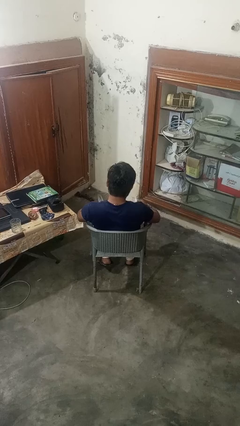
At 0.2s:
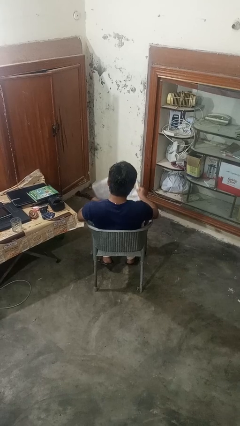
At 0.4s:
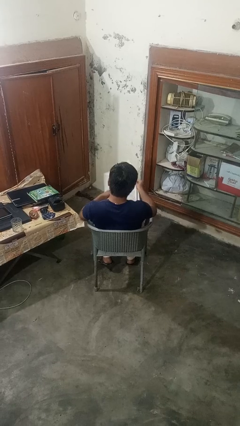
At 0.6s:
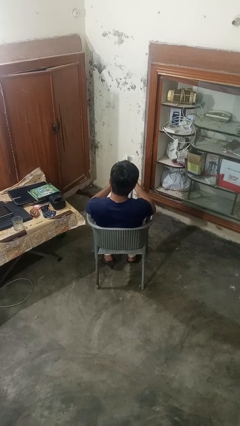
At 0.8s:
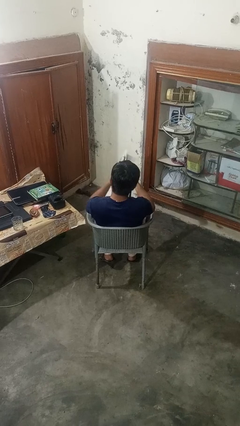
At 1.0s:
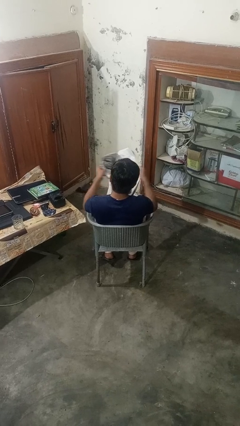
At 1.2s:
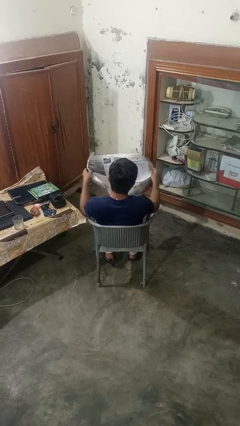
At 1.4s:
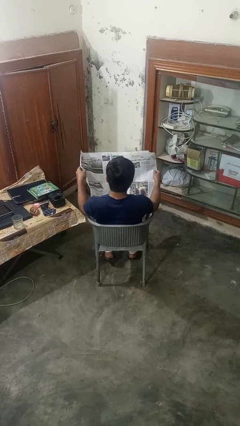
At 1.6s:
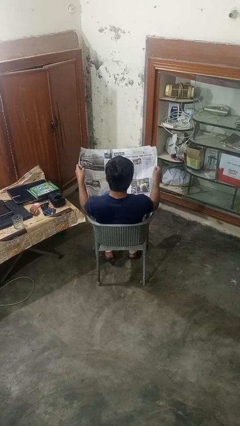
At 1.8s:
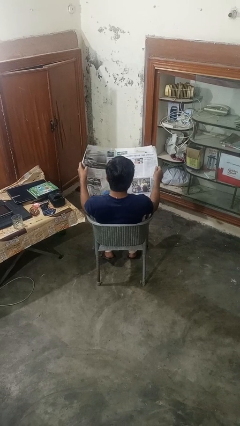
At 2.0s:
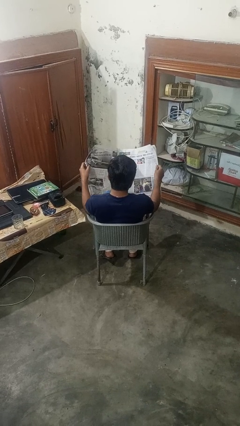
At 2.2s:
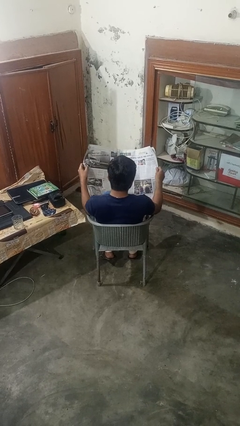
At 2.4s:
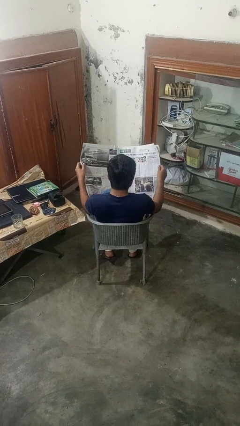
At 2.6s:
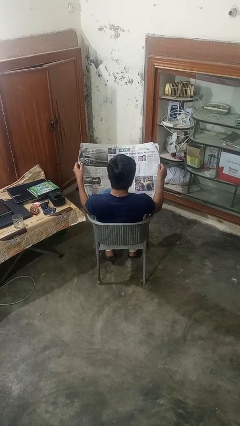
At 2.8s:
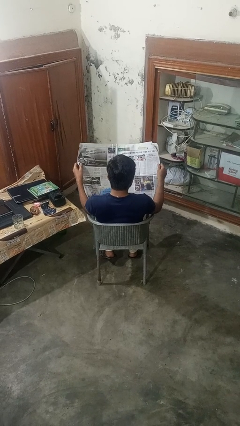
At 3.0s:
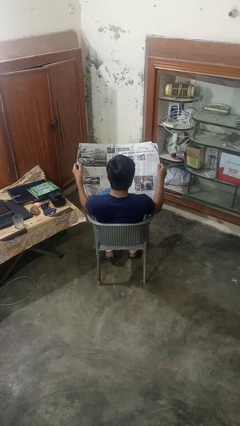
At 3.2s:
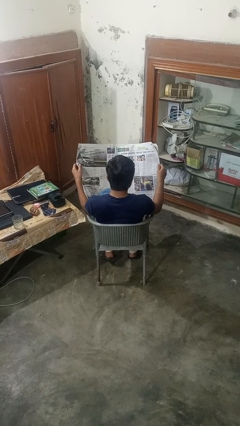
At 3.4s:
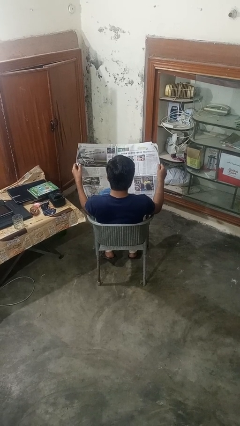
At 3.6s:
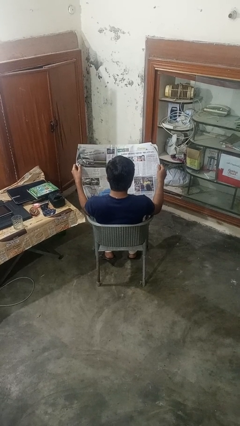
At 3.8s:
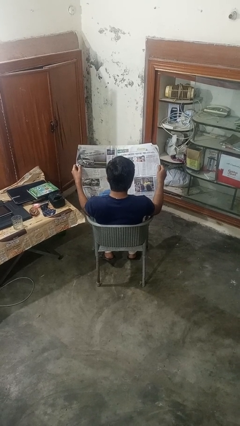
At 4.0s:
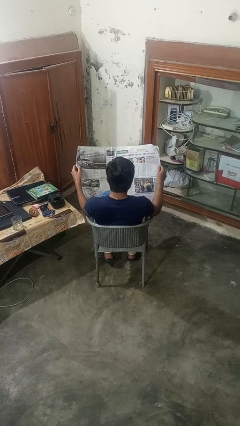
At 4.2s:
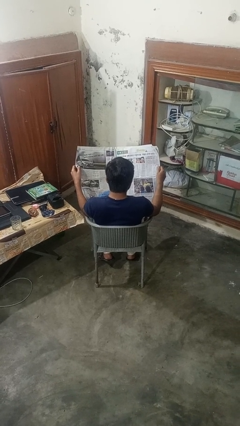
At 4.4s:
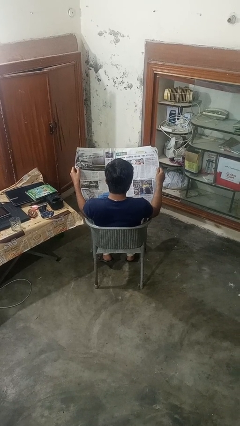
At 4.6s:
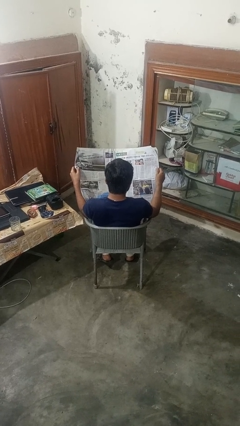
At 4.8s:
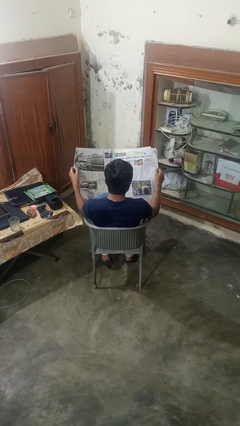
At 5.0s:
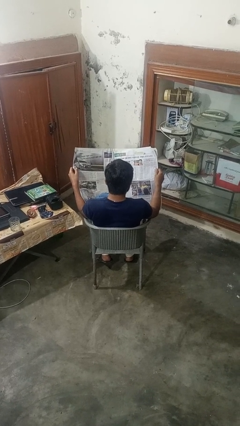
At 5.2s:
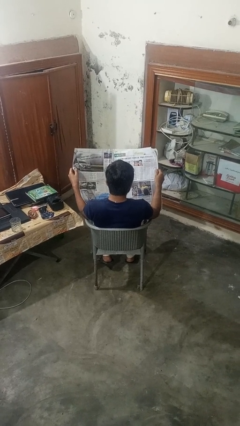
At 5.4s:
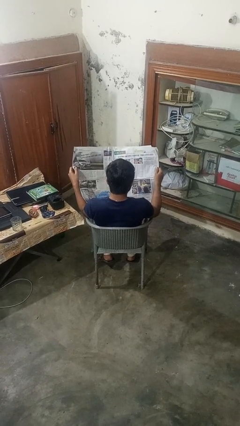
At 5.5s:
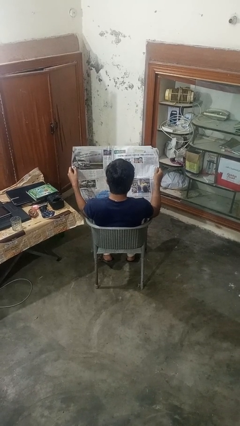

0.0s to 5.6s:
person reads newspaper

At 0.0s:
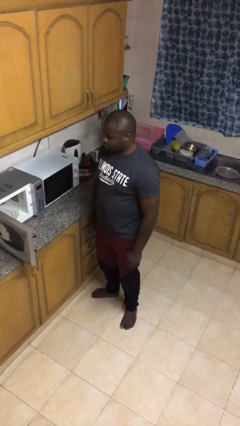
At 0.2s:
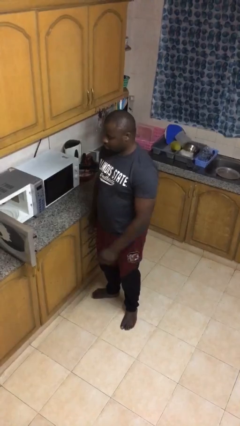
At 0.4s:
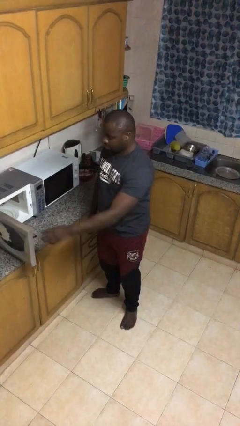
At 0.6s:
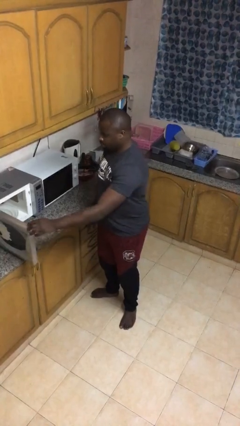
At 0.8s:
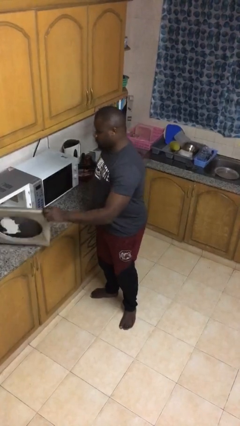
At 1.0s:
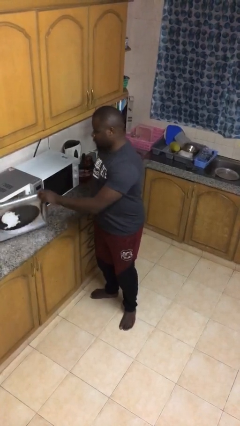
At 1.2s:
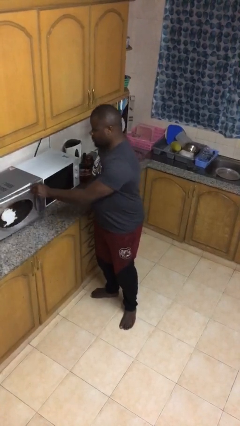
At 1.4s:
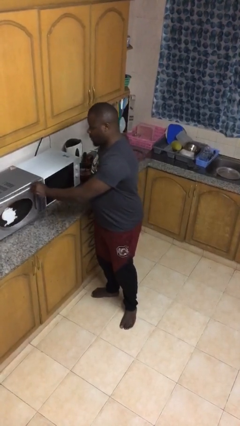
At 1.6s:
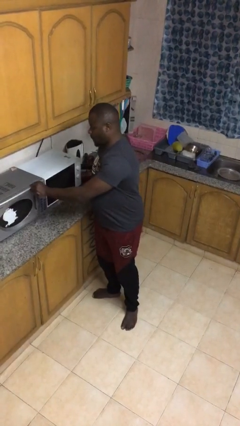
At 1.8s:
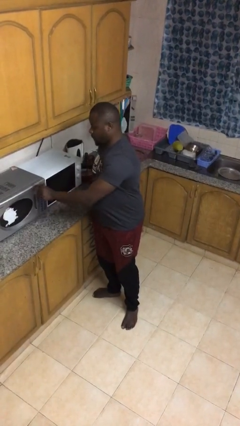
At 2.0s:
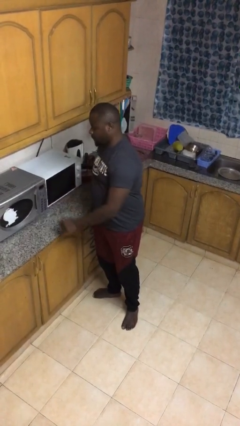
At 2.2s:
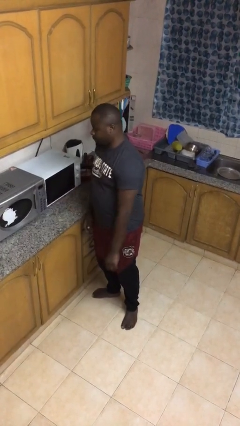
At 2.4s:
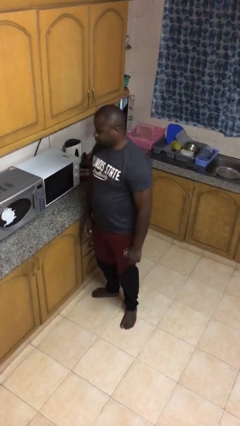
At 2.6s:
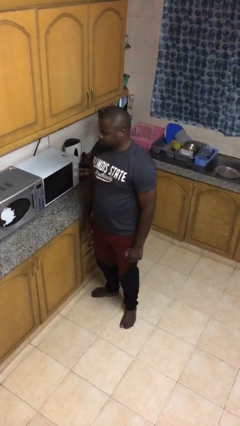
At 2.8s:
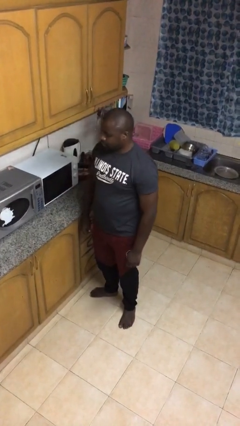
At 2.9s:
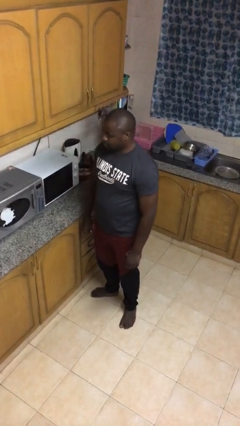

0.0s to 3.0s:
person closes microwave

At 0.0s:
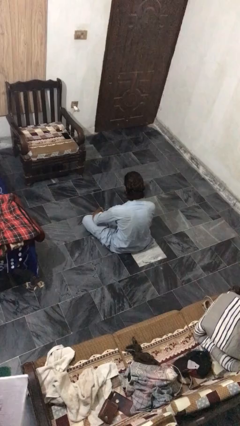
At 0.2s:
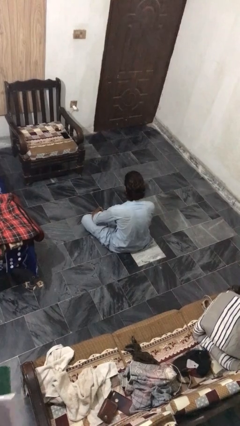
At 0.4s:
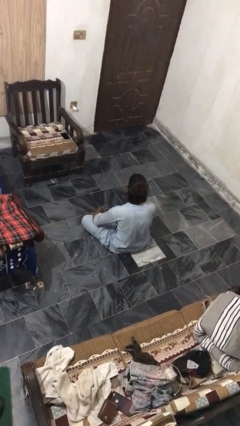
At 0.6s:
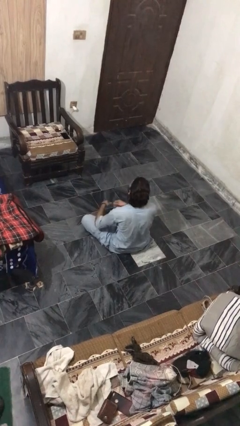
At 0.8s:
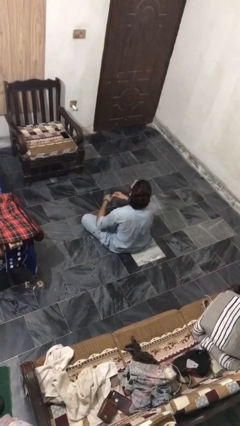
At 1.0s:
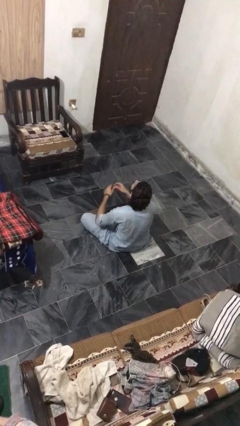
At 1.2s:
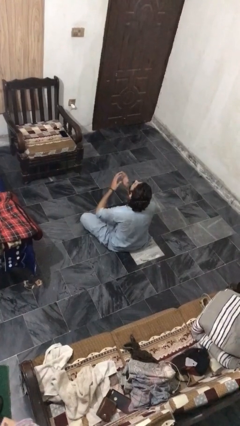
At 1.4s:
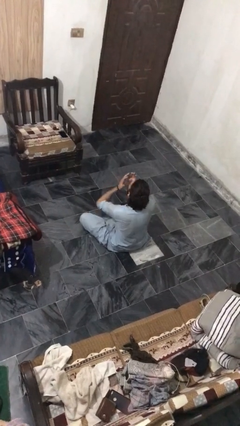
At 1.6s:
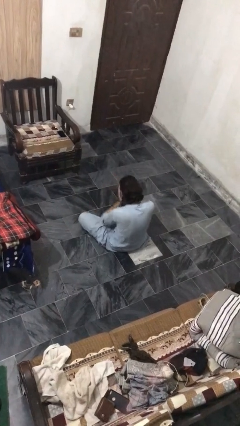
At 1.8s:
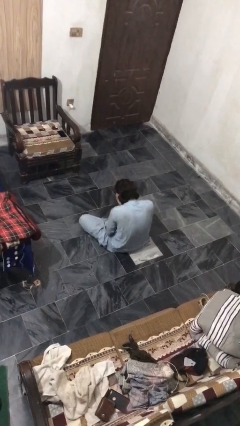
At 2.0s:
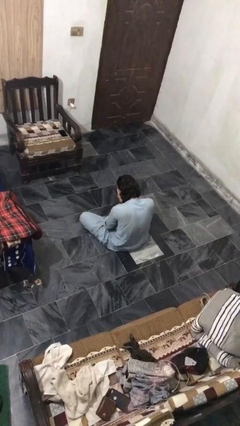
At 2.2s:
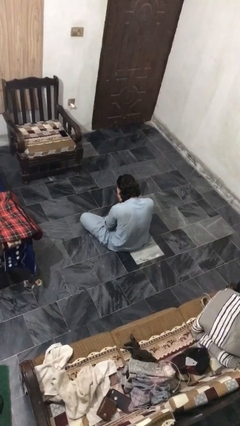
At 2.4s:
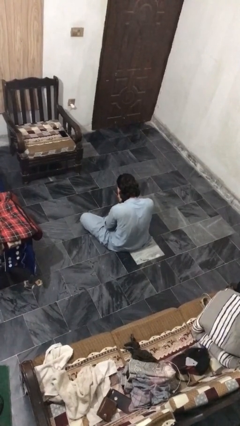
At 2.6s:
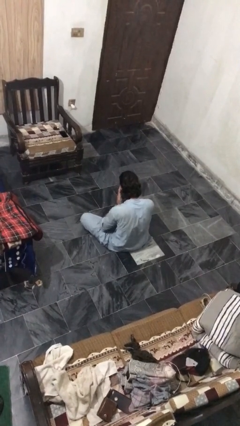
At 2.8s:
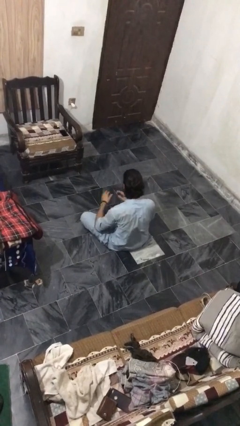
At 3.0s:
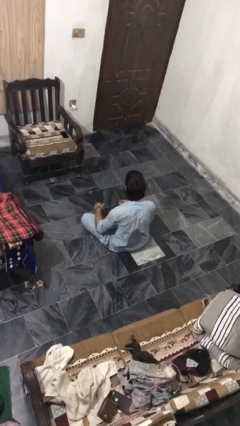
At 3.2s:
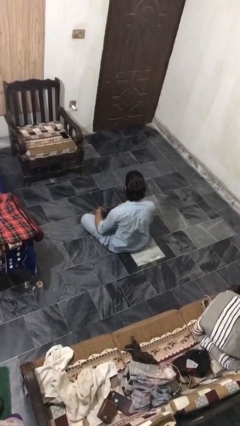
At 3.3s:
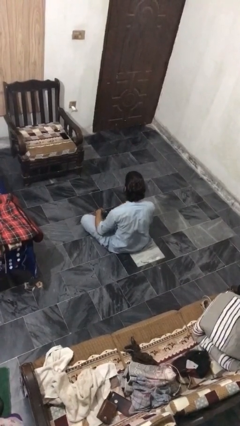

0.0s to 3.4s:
person sneezes into hand

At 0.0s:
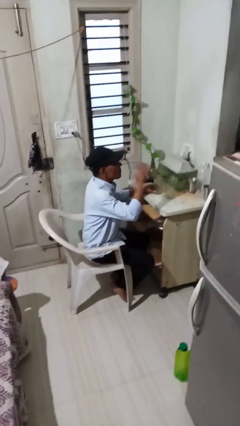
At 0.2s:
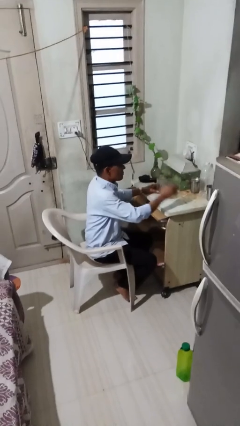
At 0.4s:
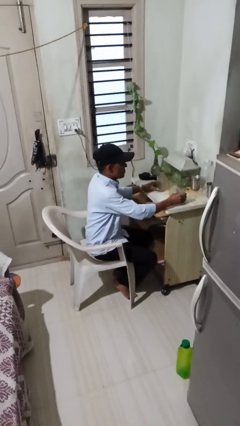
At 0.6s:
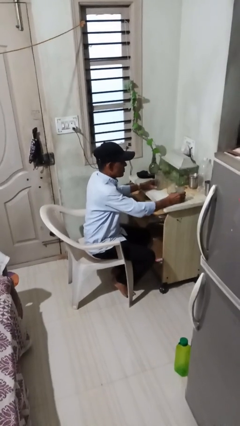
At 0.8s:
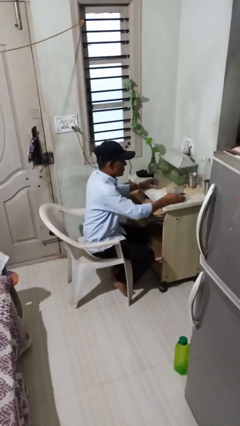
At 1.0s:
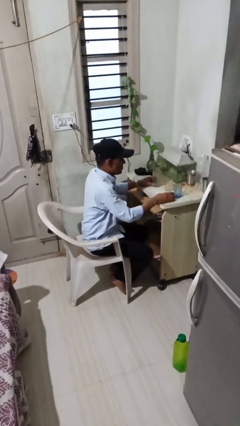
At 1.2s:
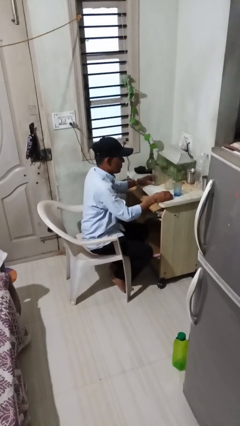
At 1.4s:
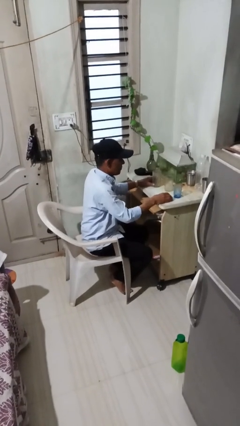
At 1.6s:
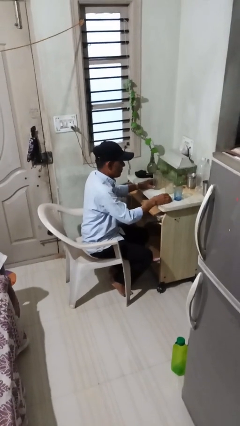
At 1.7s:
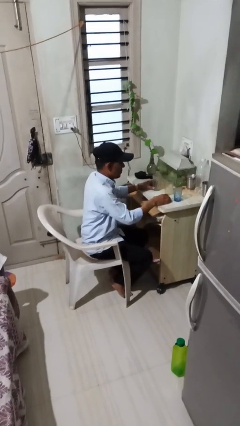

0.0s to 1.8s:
person puts down object on table

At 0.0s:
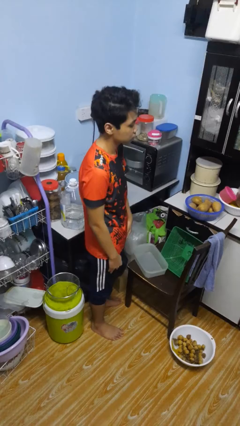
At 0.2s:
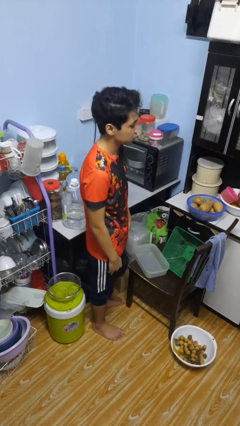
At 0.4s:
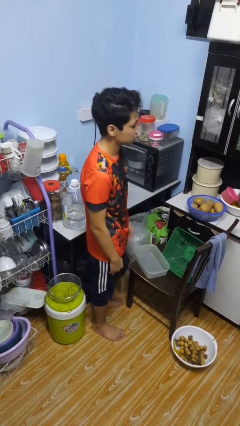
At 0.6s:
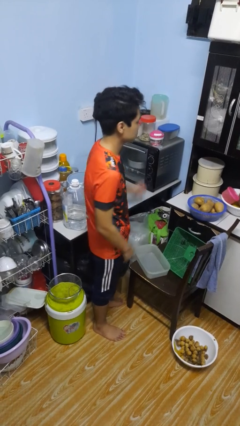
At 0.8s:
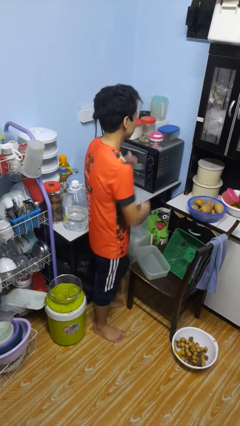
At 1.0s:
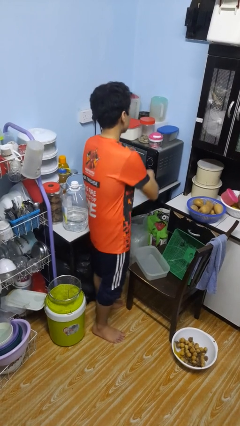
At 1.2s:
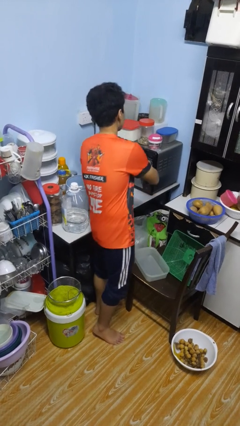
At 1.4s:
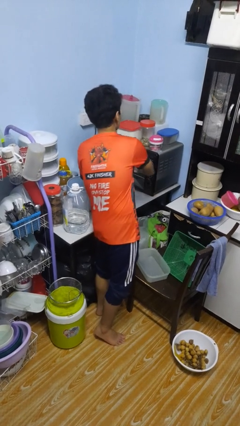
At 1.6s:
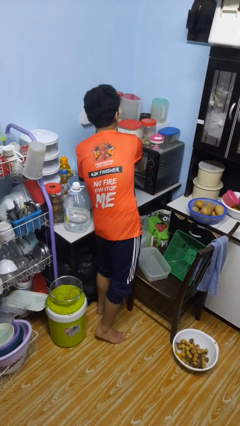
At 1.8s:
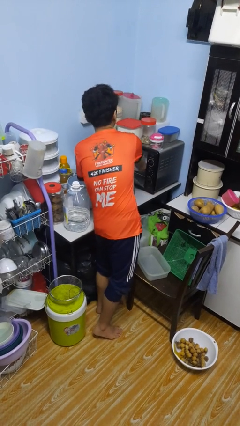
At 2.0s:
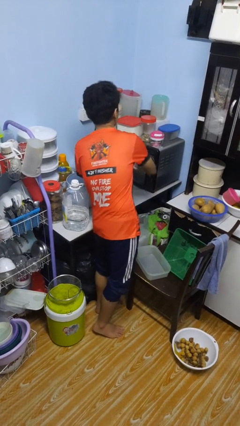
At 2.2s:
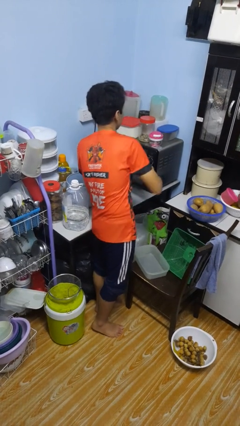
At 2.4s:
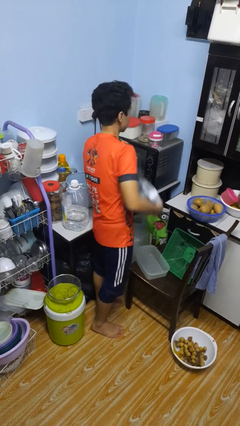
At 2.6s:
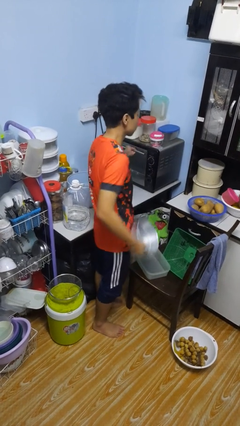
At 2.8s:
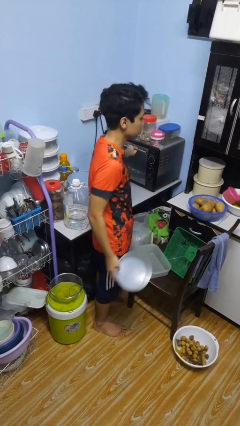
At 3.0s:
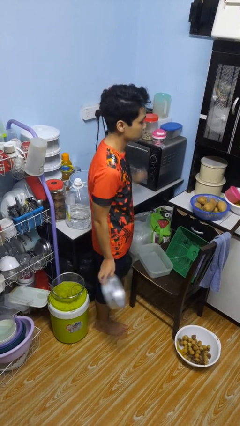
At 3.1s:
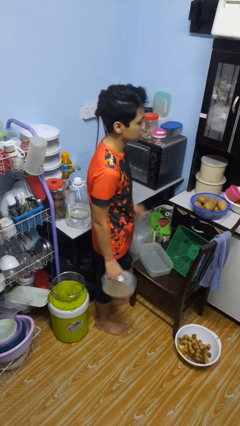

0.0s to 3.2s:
person takes object from oven

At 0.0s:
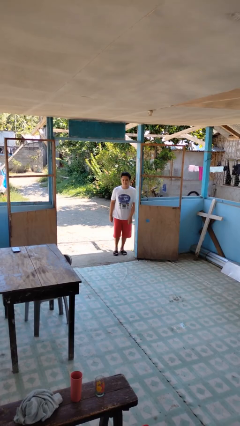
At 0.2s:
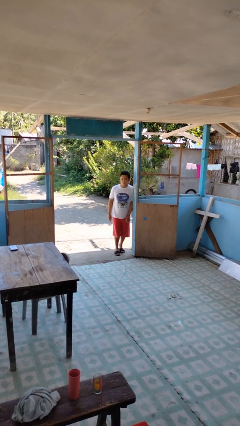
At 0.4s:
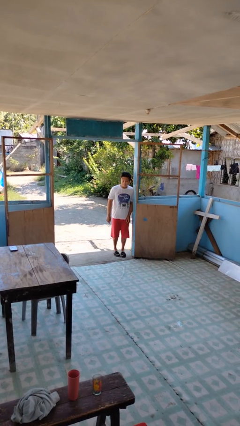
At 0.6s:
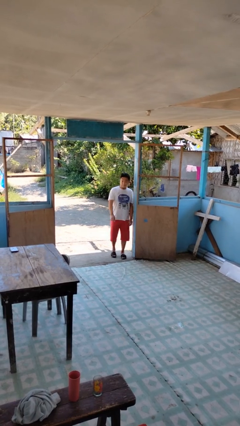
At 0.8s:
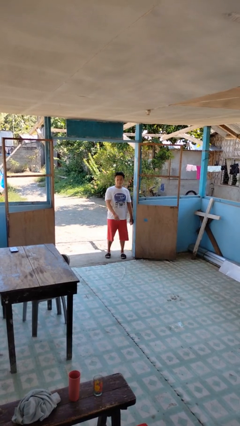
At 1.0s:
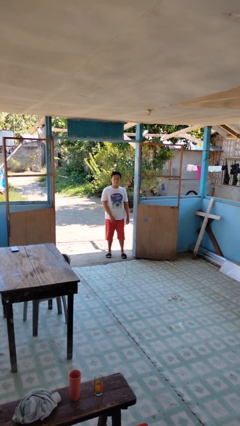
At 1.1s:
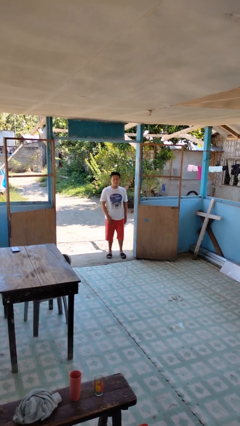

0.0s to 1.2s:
person bumps into wall
